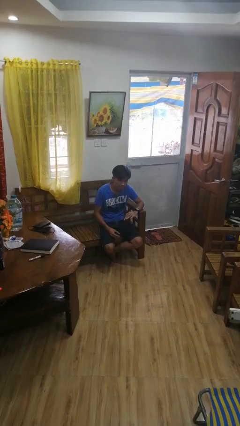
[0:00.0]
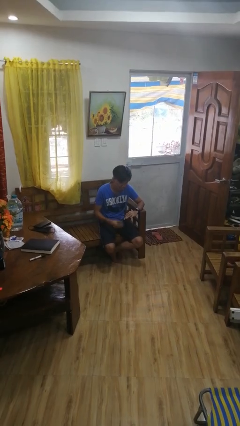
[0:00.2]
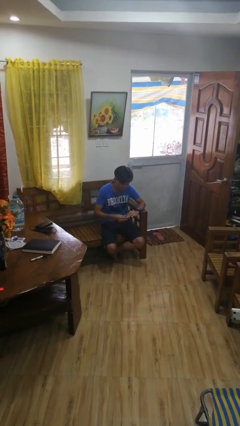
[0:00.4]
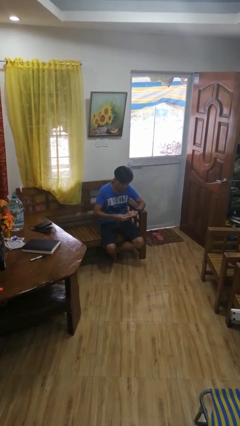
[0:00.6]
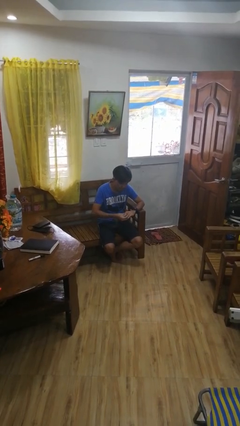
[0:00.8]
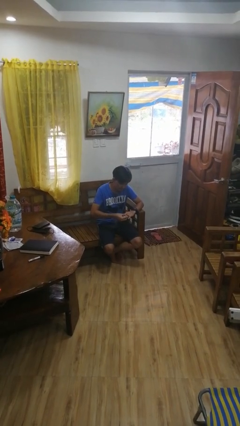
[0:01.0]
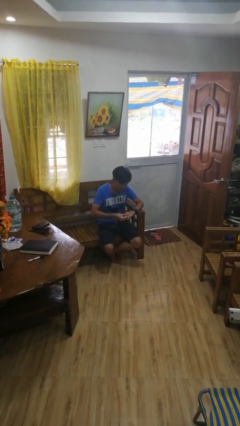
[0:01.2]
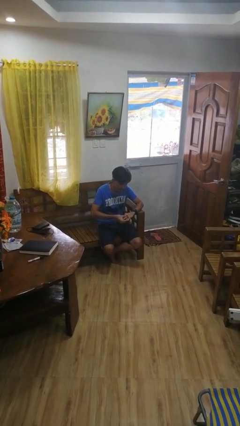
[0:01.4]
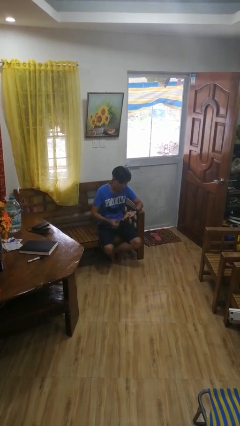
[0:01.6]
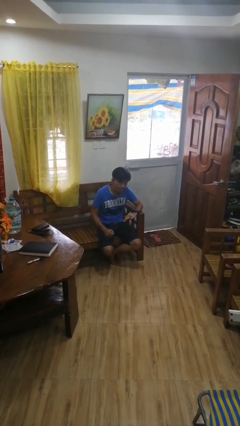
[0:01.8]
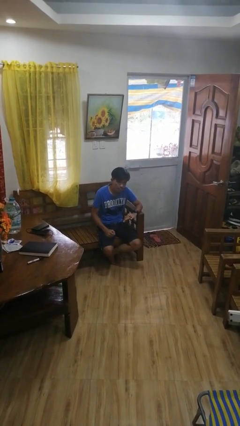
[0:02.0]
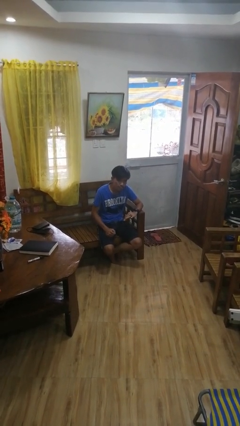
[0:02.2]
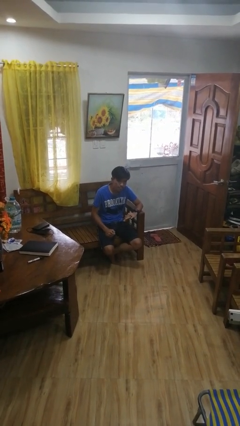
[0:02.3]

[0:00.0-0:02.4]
person puts on ring

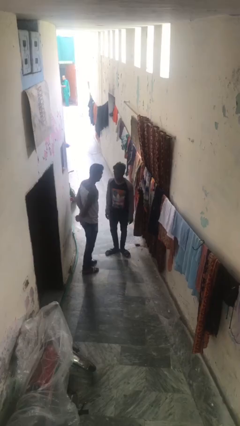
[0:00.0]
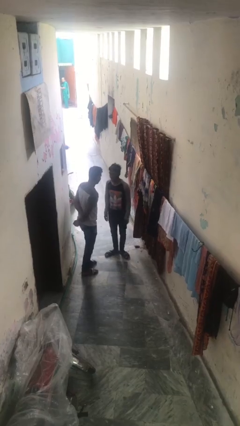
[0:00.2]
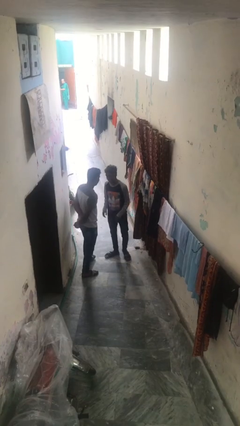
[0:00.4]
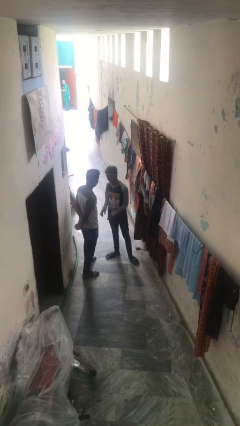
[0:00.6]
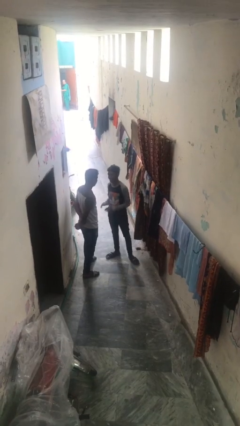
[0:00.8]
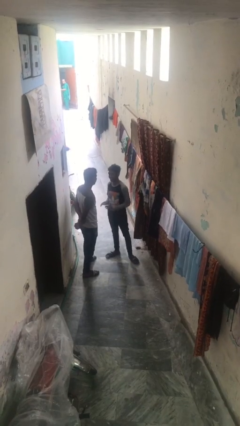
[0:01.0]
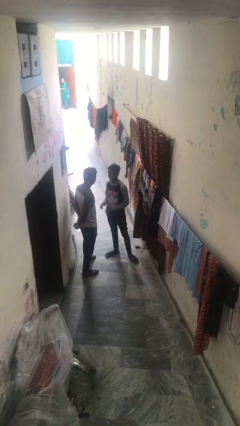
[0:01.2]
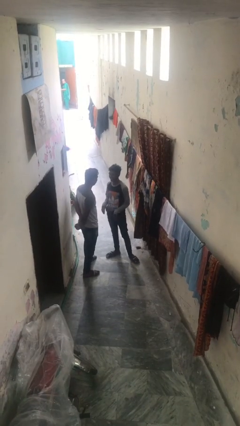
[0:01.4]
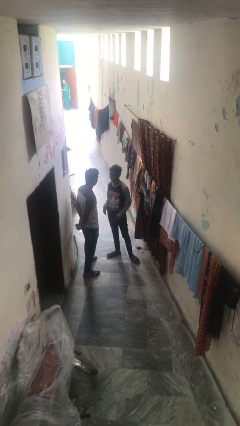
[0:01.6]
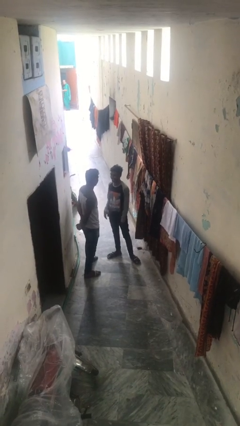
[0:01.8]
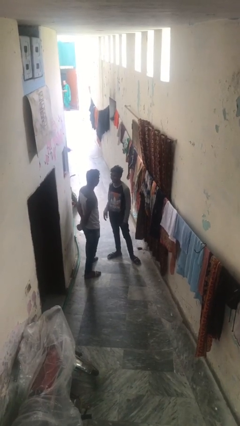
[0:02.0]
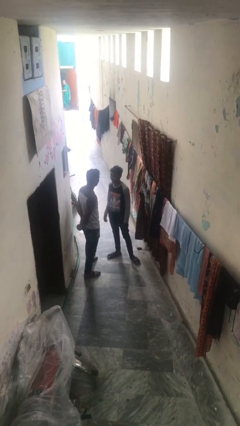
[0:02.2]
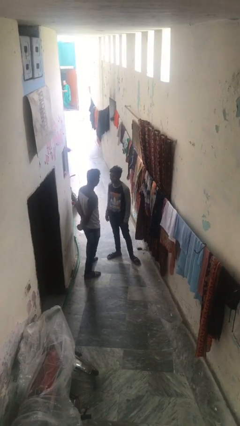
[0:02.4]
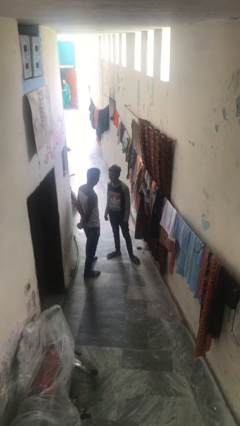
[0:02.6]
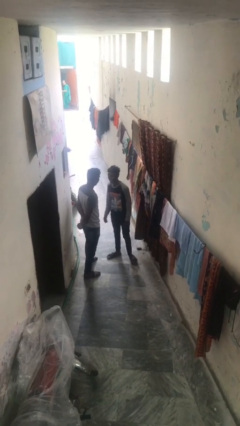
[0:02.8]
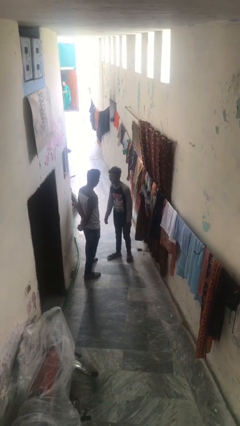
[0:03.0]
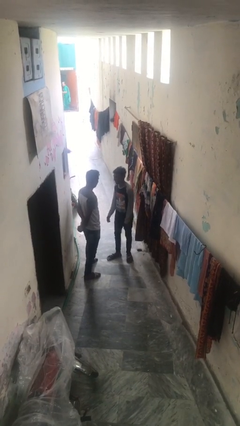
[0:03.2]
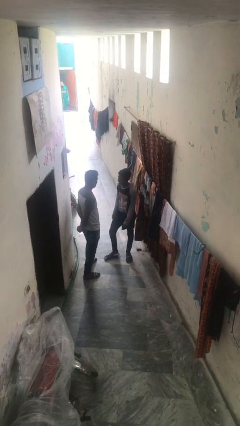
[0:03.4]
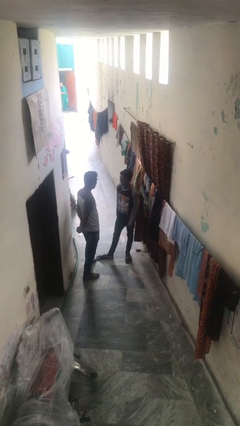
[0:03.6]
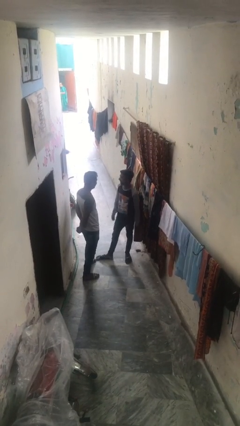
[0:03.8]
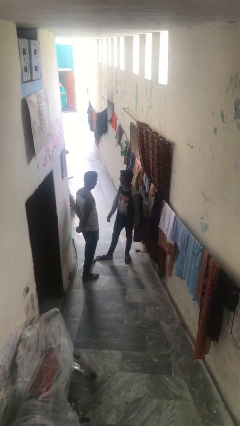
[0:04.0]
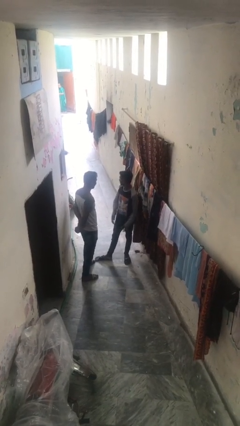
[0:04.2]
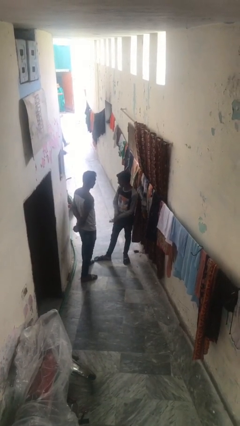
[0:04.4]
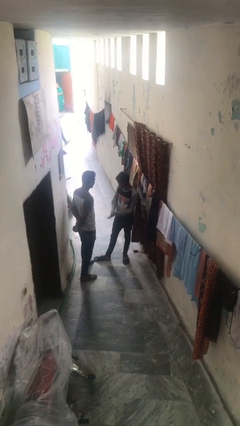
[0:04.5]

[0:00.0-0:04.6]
person talks to person

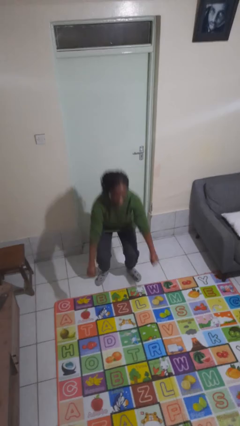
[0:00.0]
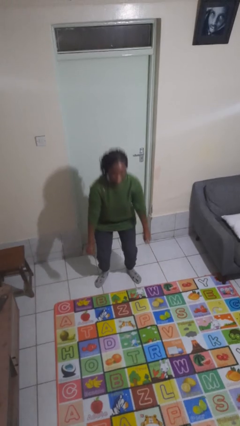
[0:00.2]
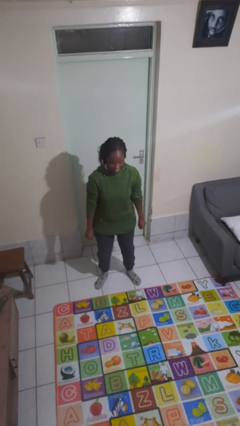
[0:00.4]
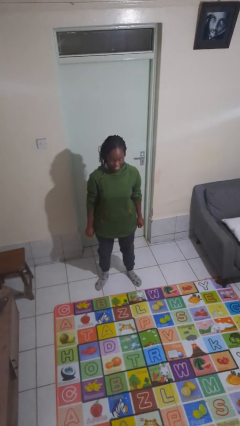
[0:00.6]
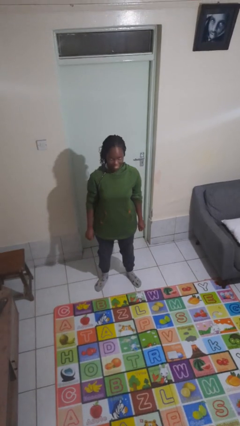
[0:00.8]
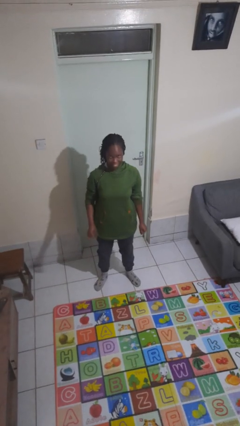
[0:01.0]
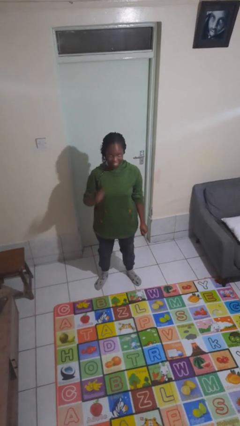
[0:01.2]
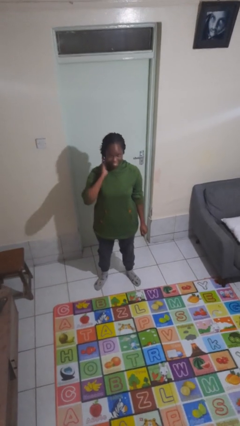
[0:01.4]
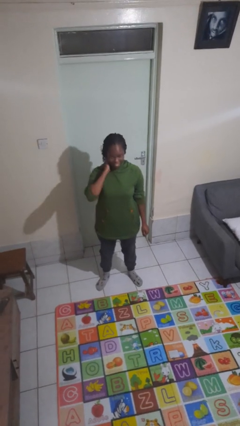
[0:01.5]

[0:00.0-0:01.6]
person stands up

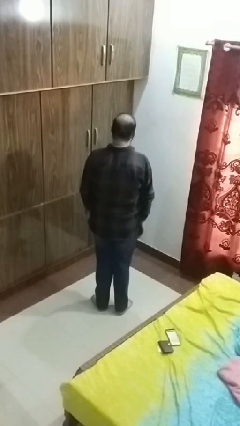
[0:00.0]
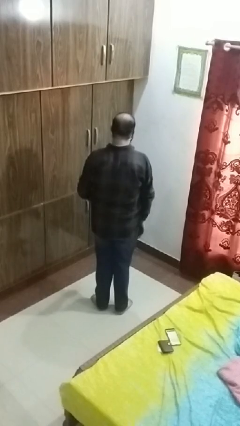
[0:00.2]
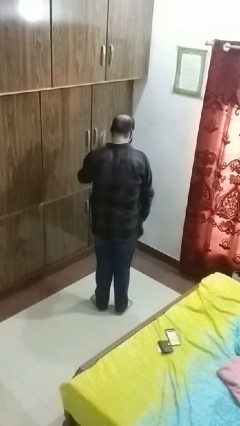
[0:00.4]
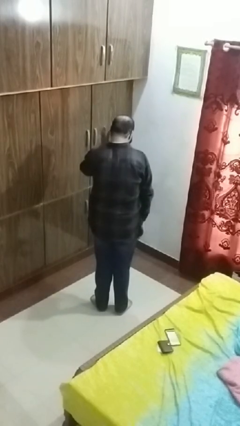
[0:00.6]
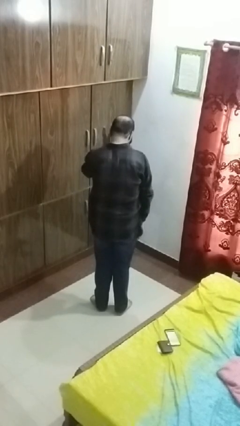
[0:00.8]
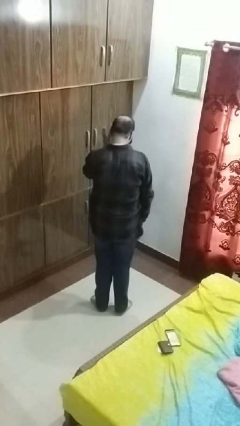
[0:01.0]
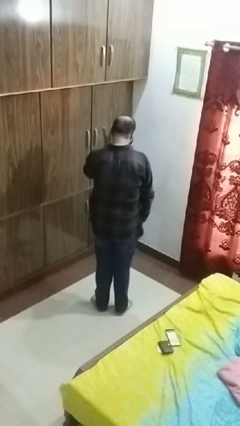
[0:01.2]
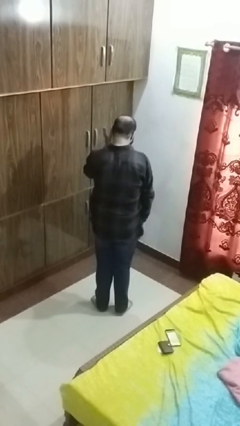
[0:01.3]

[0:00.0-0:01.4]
person gestures listen closely

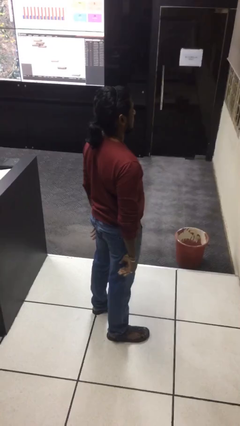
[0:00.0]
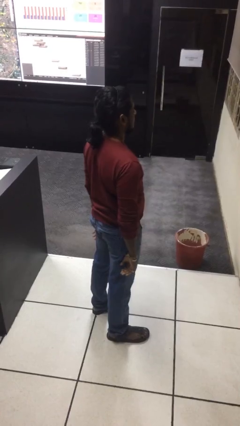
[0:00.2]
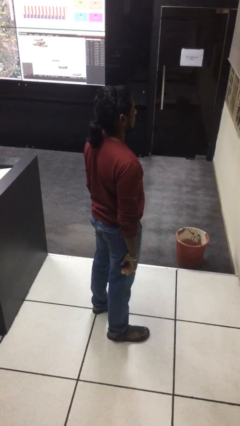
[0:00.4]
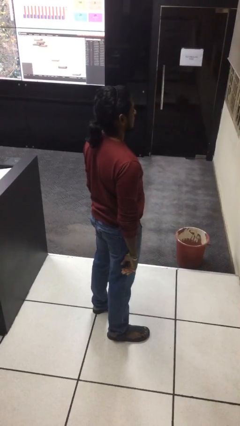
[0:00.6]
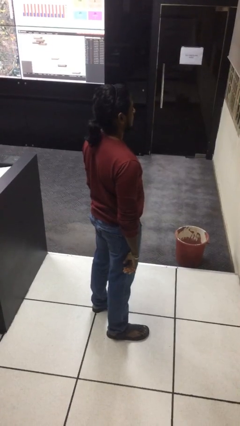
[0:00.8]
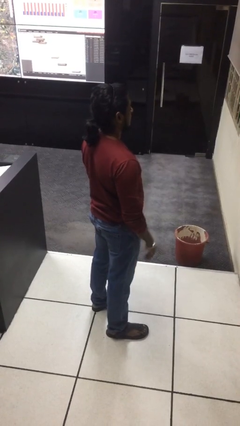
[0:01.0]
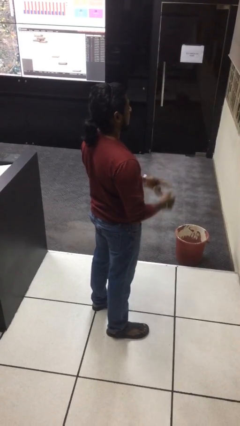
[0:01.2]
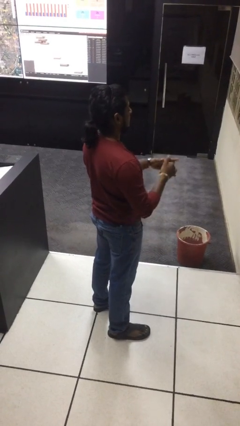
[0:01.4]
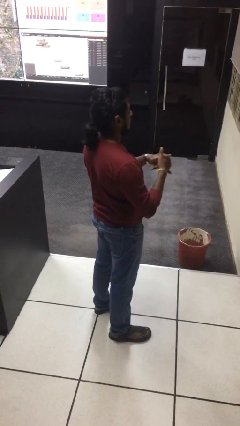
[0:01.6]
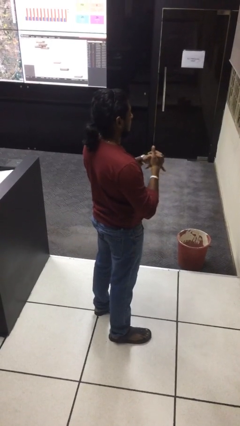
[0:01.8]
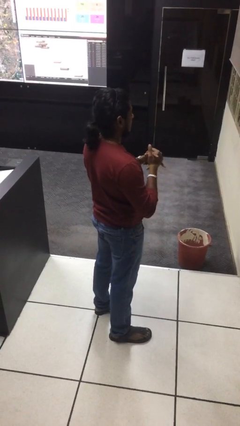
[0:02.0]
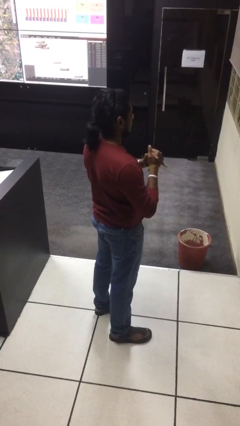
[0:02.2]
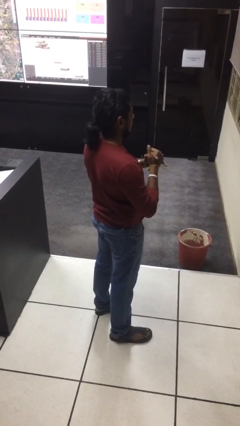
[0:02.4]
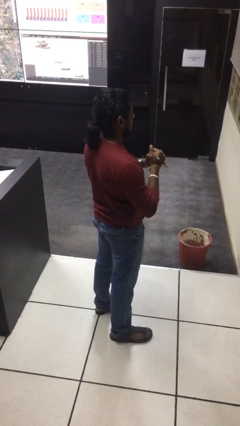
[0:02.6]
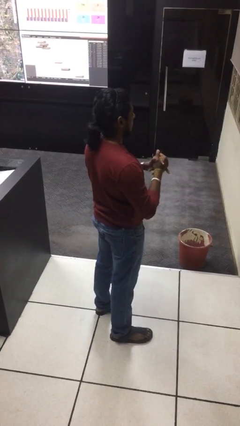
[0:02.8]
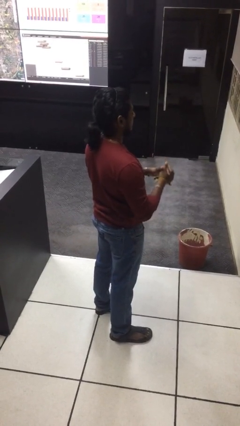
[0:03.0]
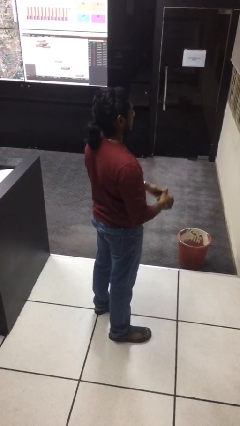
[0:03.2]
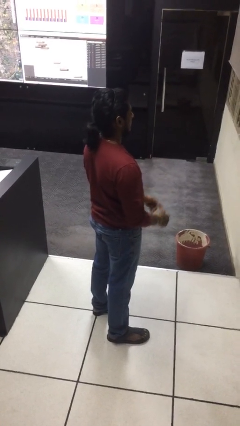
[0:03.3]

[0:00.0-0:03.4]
person cracks knuckles

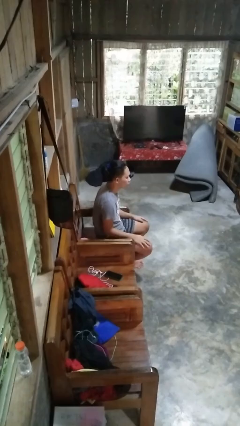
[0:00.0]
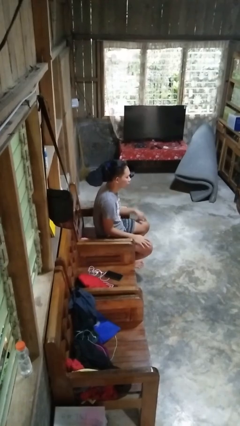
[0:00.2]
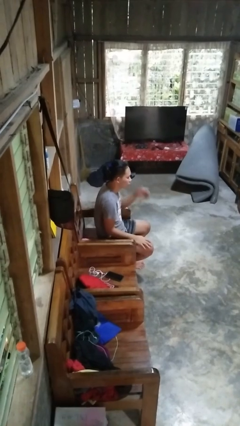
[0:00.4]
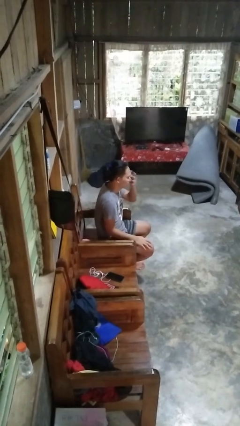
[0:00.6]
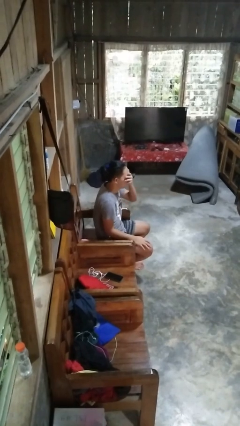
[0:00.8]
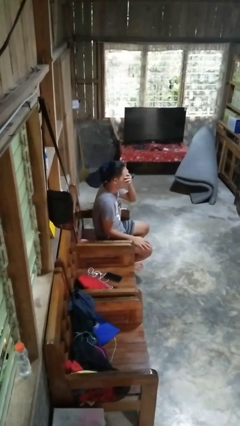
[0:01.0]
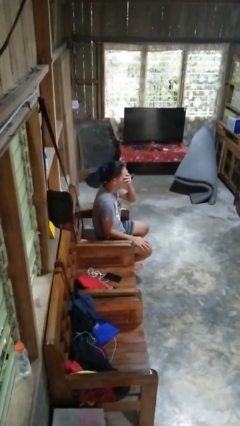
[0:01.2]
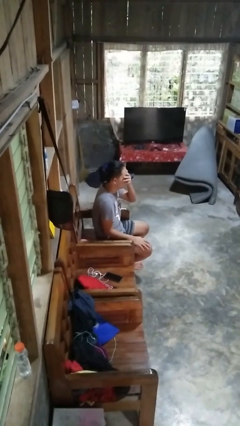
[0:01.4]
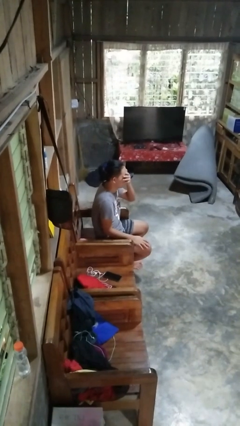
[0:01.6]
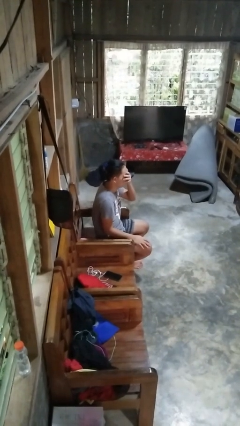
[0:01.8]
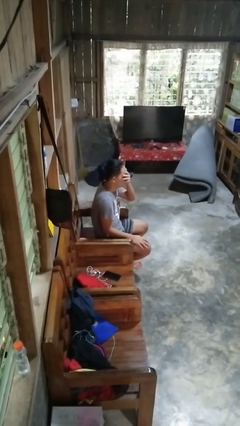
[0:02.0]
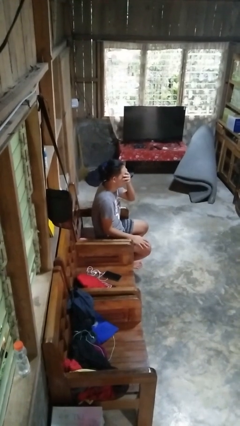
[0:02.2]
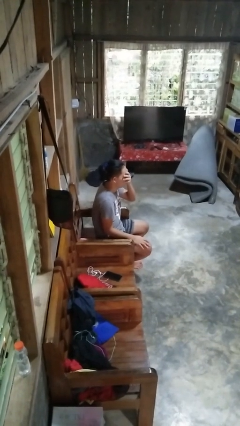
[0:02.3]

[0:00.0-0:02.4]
person covers face with hands

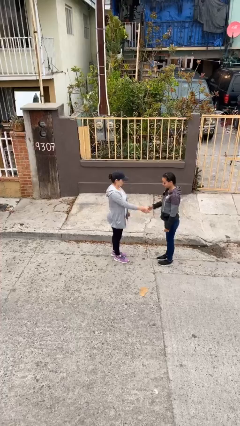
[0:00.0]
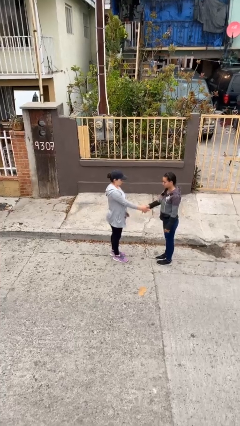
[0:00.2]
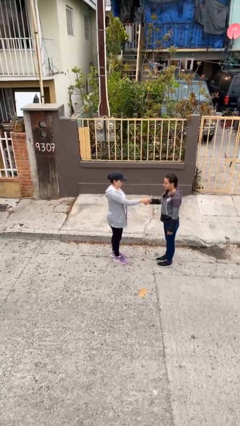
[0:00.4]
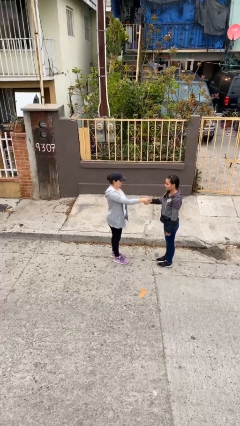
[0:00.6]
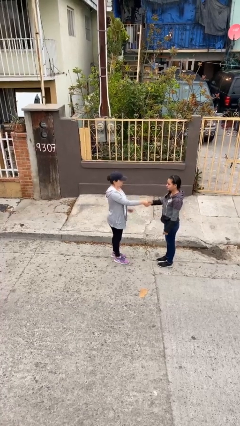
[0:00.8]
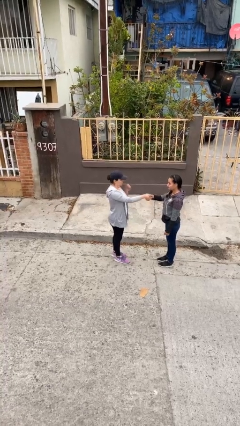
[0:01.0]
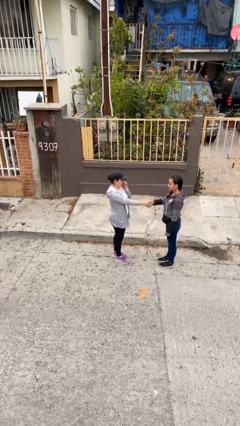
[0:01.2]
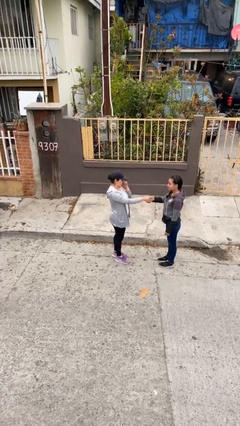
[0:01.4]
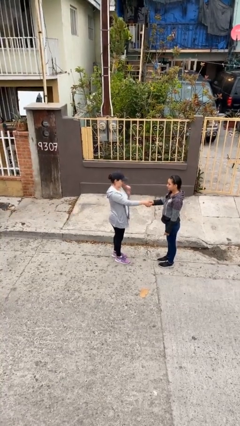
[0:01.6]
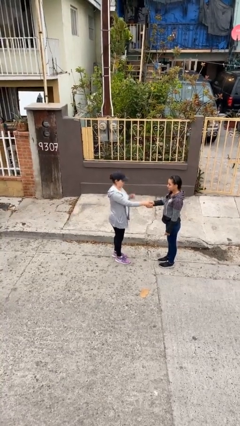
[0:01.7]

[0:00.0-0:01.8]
person shakes hand
